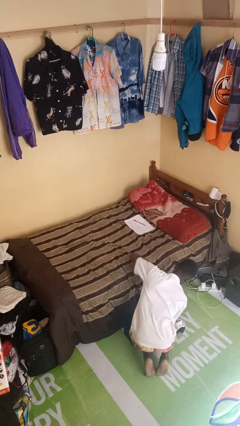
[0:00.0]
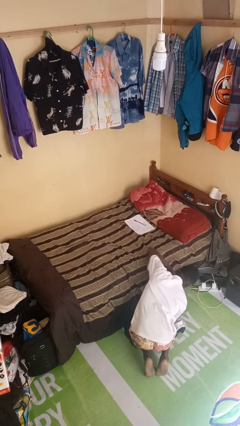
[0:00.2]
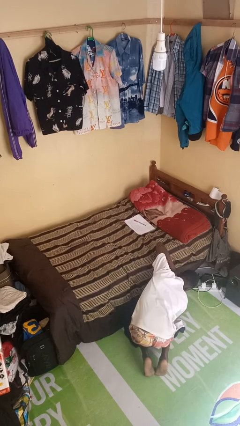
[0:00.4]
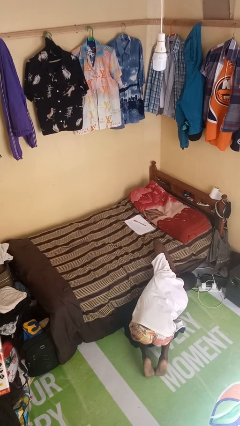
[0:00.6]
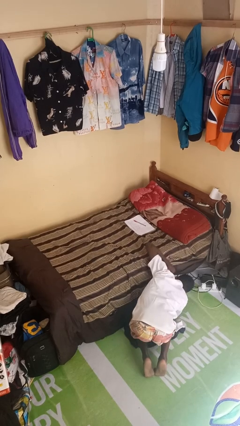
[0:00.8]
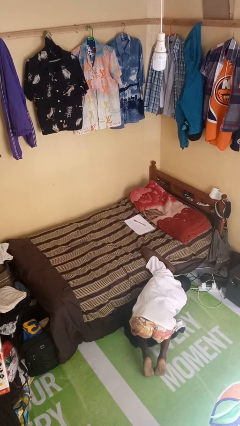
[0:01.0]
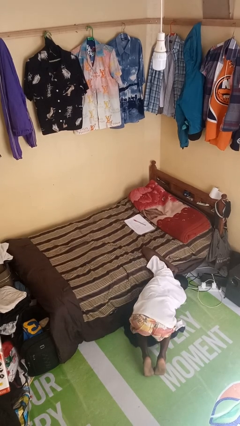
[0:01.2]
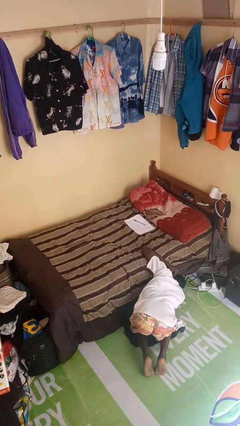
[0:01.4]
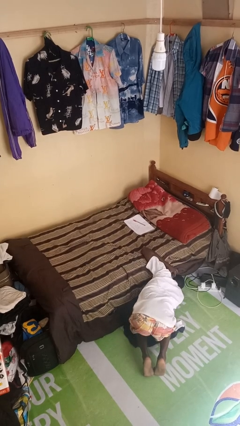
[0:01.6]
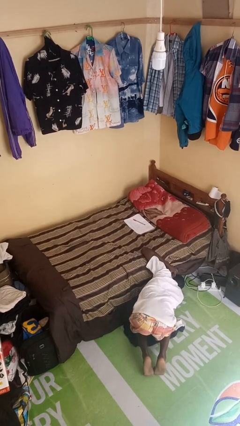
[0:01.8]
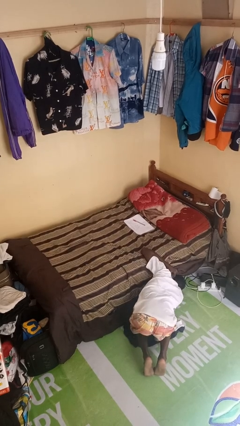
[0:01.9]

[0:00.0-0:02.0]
person searches under bed

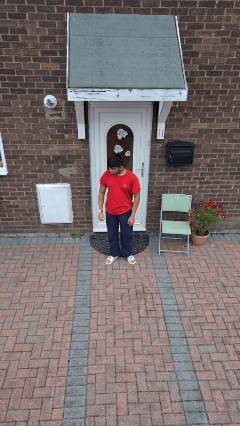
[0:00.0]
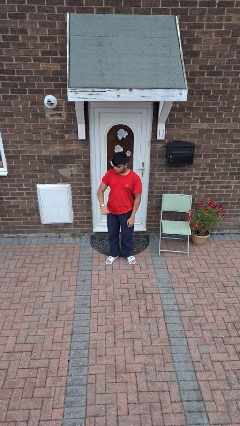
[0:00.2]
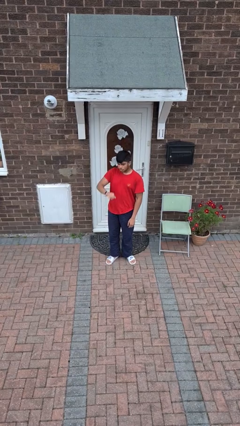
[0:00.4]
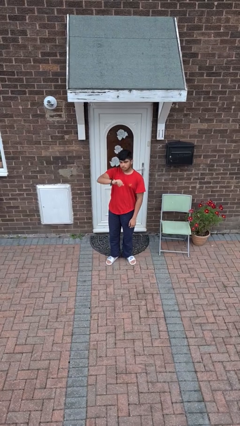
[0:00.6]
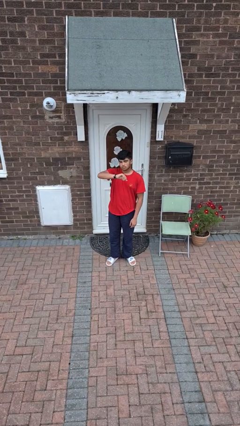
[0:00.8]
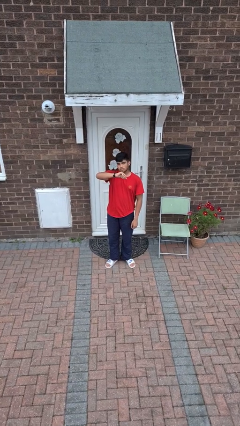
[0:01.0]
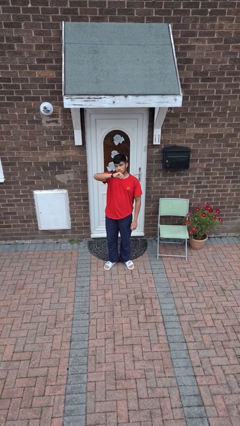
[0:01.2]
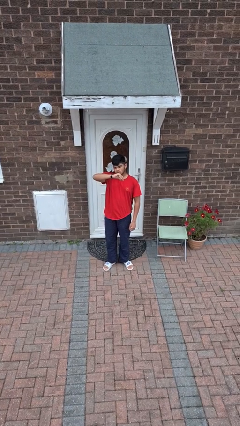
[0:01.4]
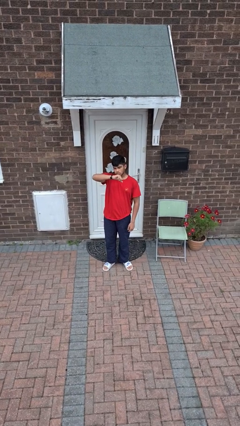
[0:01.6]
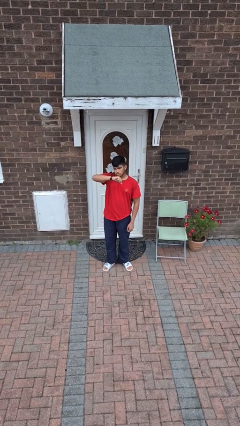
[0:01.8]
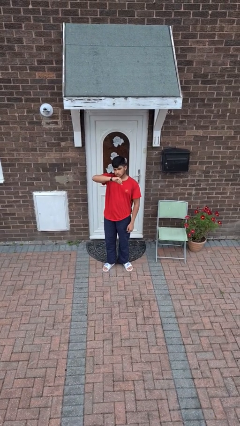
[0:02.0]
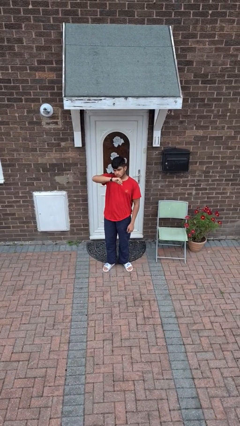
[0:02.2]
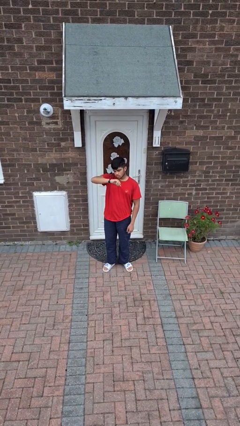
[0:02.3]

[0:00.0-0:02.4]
person looks at wristwatch

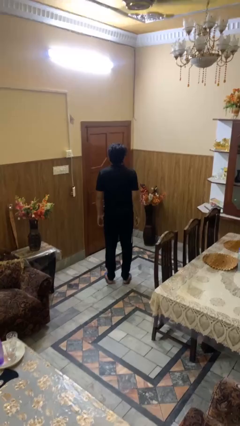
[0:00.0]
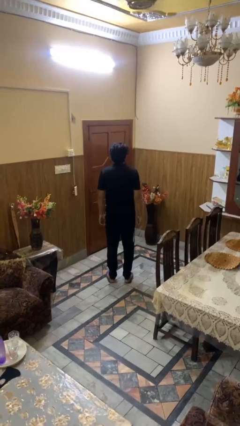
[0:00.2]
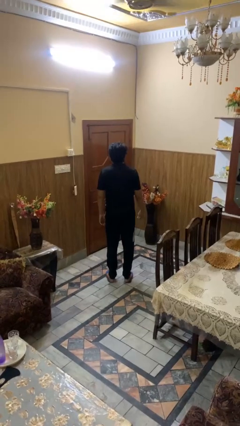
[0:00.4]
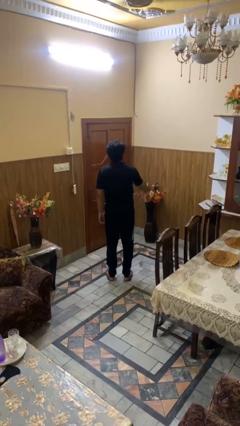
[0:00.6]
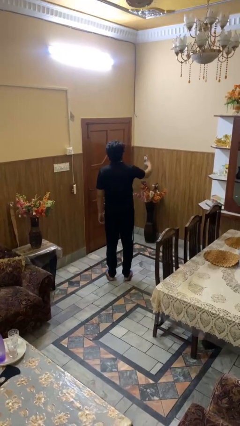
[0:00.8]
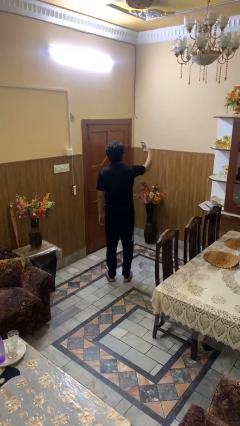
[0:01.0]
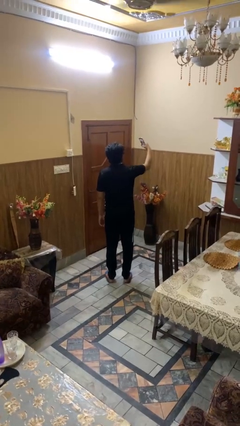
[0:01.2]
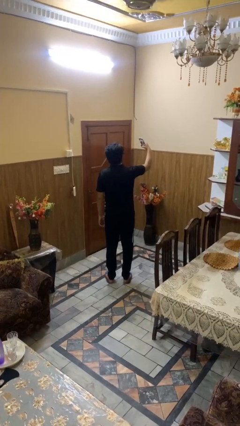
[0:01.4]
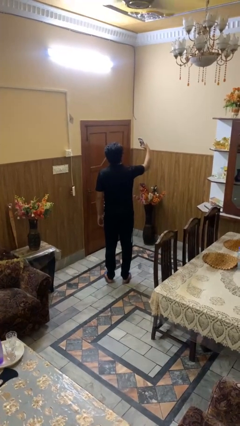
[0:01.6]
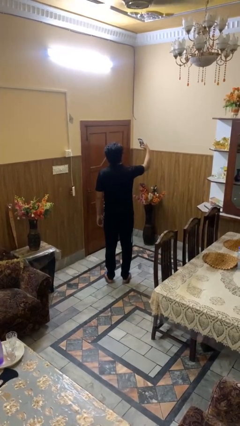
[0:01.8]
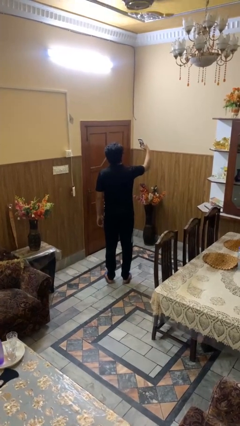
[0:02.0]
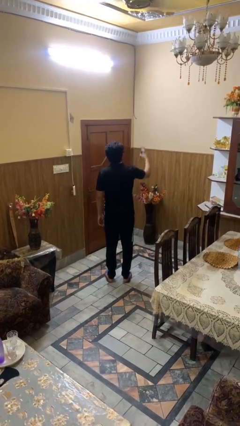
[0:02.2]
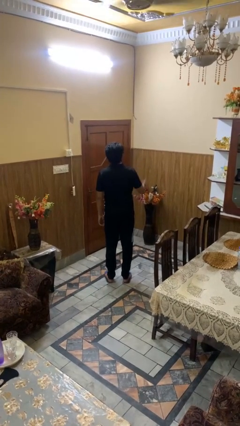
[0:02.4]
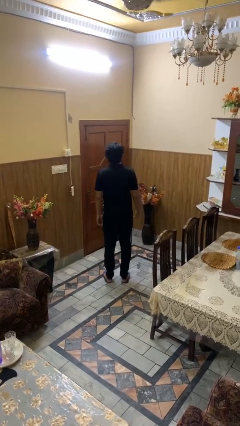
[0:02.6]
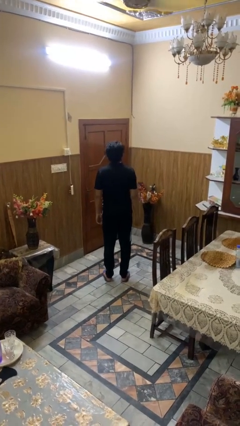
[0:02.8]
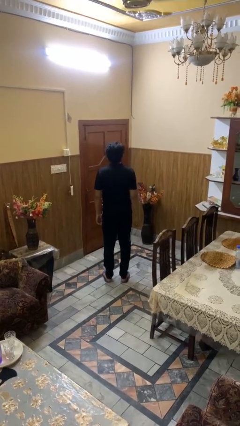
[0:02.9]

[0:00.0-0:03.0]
person takes selfie

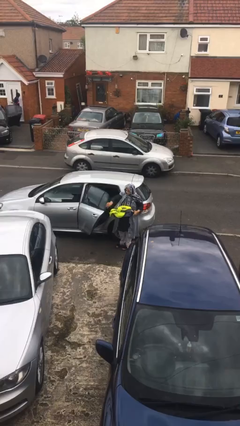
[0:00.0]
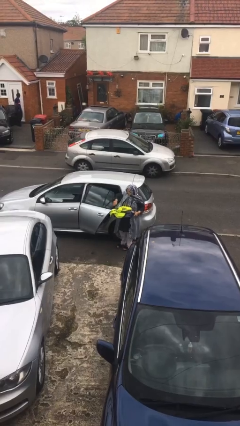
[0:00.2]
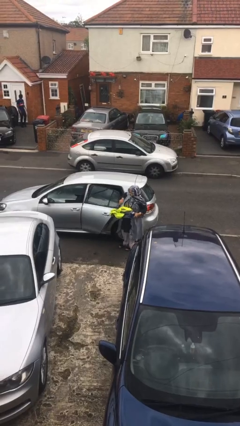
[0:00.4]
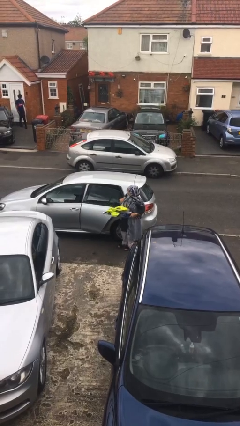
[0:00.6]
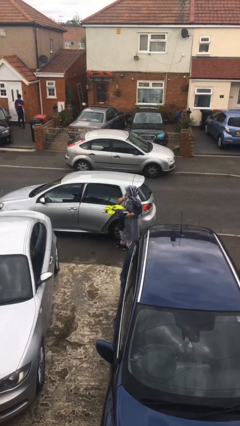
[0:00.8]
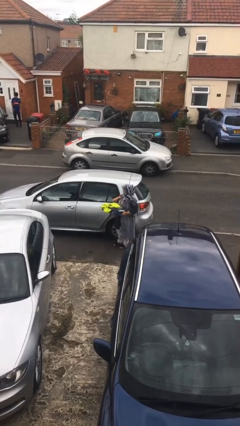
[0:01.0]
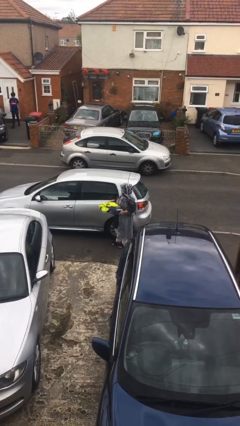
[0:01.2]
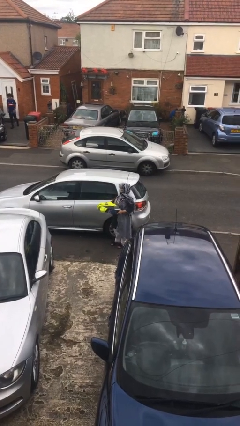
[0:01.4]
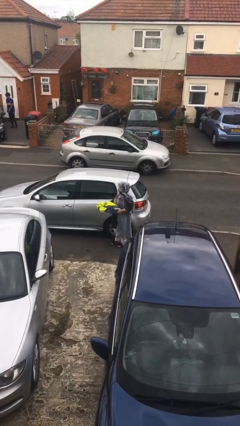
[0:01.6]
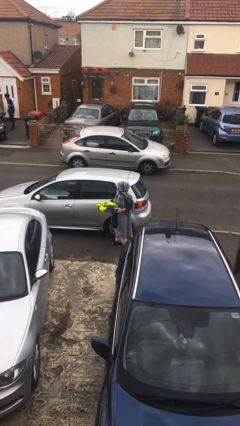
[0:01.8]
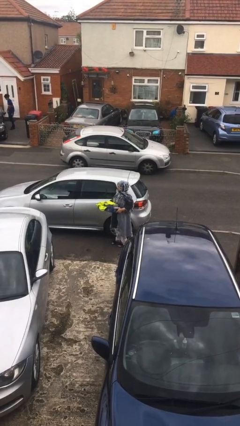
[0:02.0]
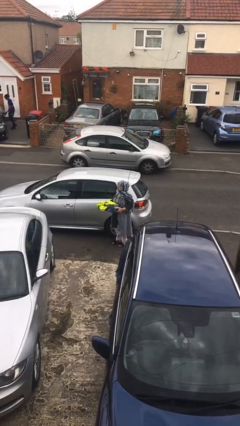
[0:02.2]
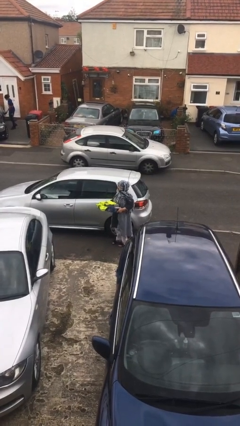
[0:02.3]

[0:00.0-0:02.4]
person closes car door

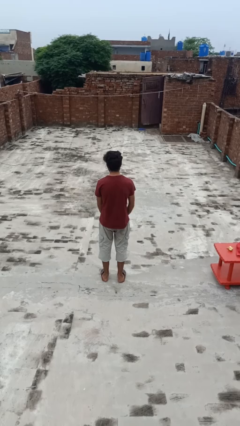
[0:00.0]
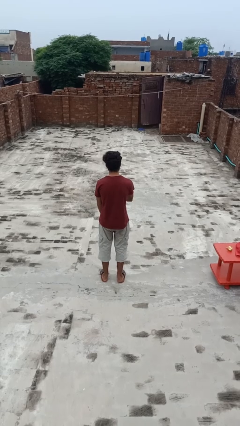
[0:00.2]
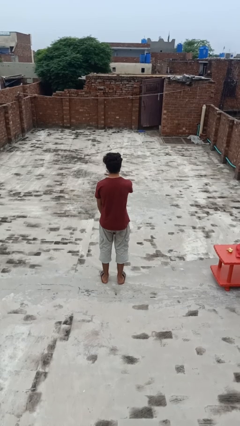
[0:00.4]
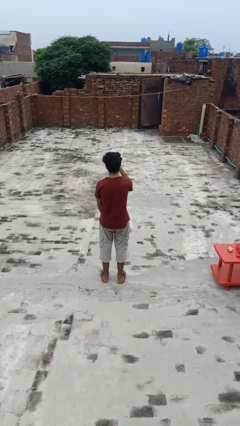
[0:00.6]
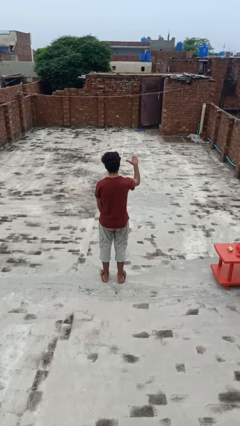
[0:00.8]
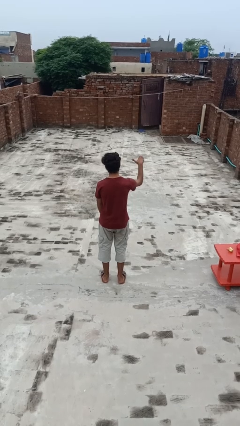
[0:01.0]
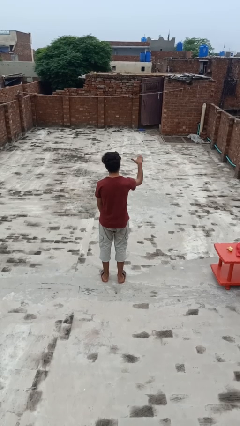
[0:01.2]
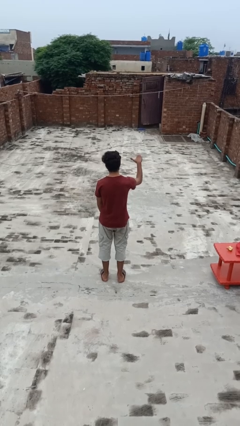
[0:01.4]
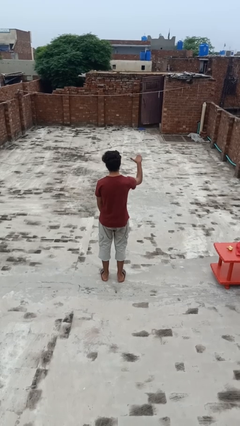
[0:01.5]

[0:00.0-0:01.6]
person gestures cut

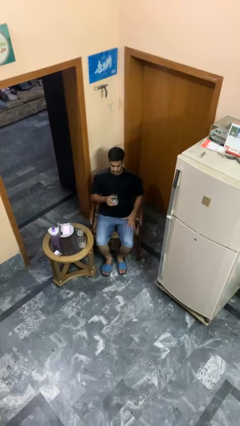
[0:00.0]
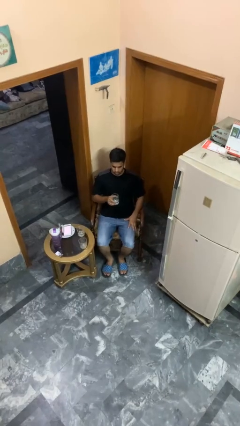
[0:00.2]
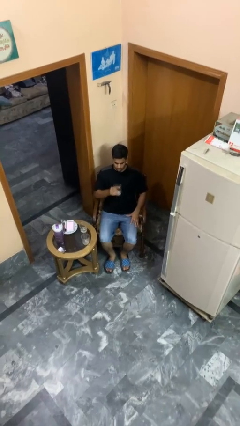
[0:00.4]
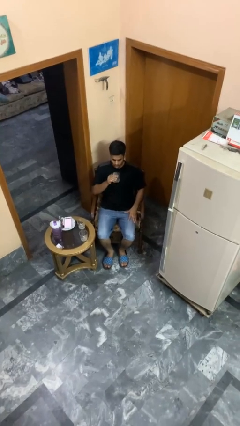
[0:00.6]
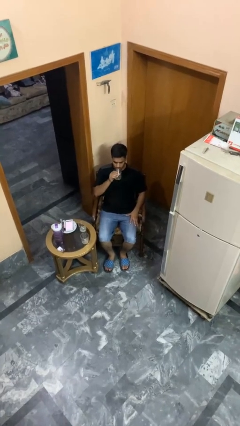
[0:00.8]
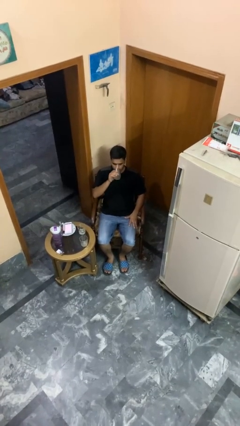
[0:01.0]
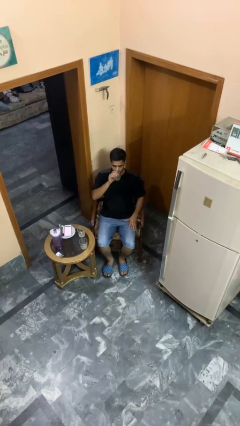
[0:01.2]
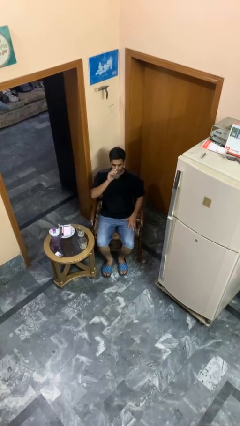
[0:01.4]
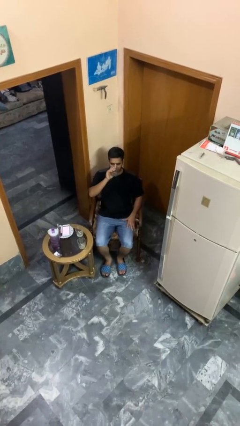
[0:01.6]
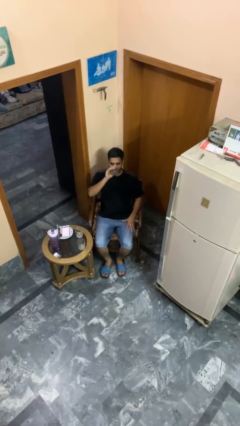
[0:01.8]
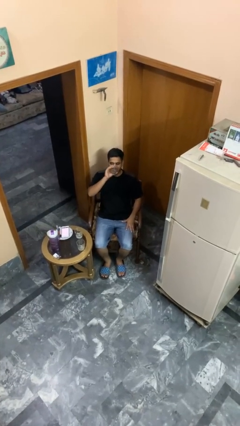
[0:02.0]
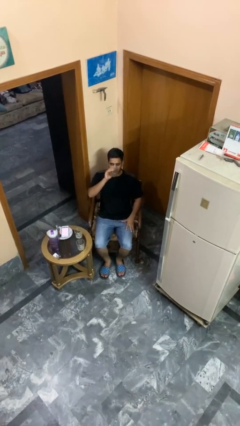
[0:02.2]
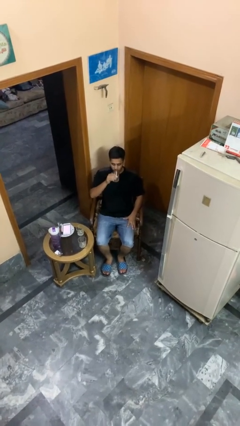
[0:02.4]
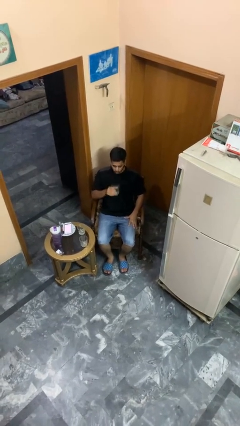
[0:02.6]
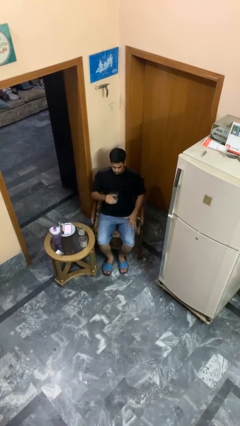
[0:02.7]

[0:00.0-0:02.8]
person drinks from shotglass

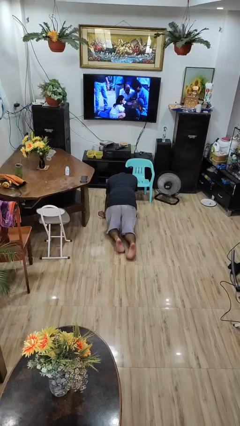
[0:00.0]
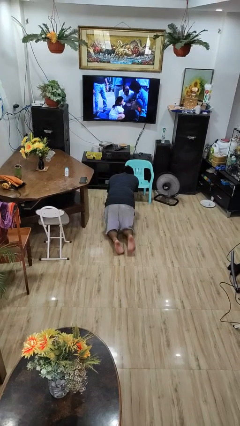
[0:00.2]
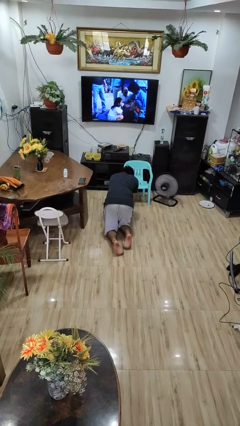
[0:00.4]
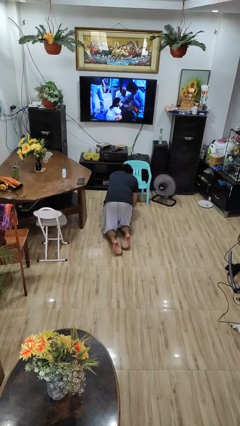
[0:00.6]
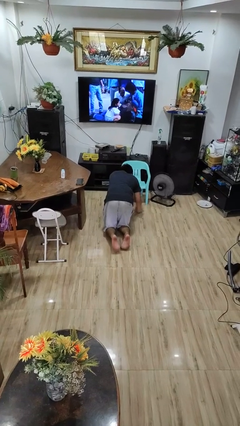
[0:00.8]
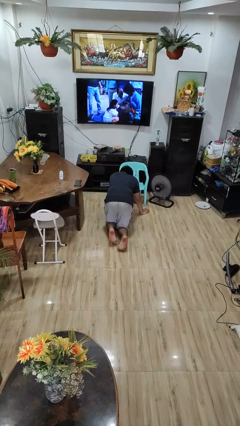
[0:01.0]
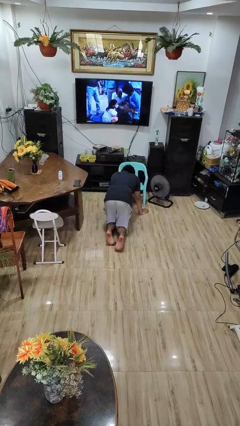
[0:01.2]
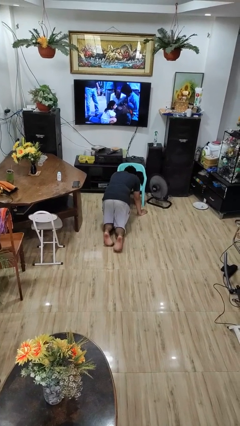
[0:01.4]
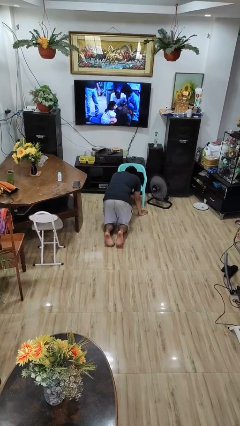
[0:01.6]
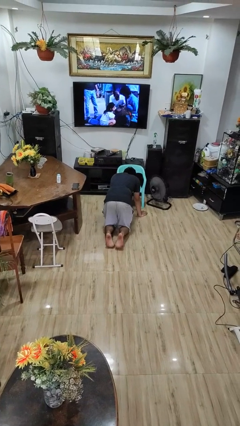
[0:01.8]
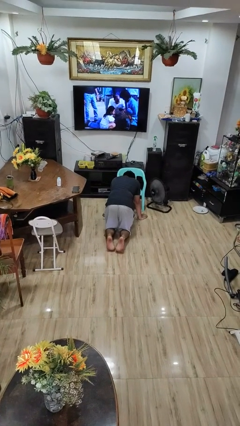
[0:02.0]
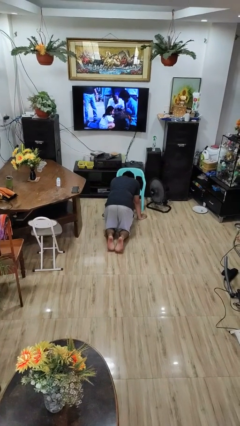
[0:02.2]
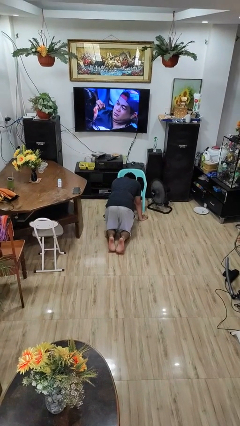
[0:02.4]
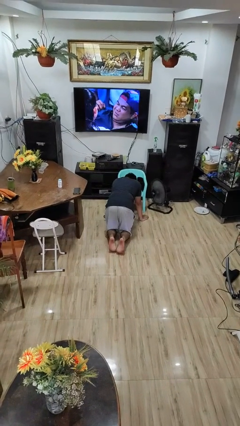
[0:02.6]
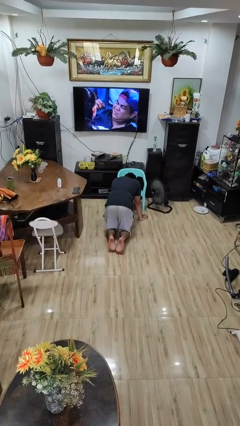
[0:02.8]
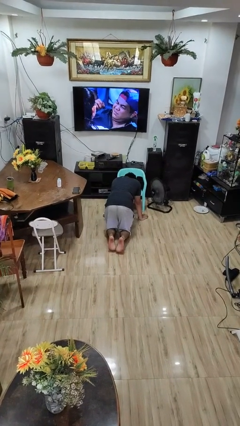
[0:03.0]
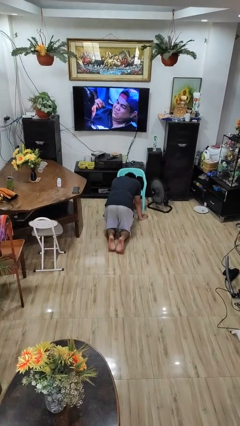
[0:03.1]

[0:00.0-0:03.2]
person crawls
